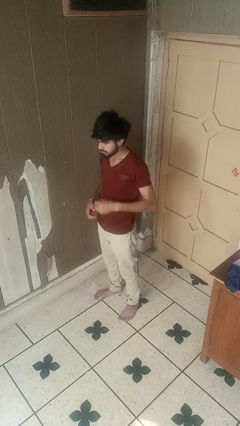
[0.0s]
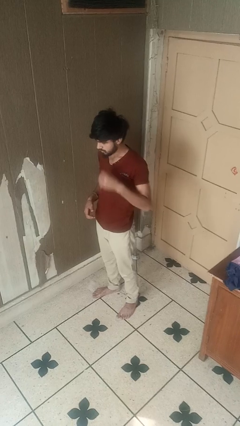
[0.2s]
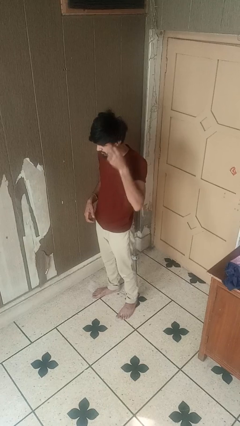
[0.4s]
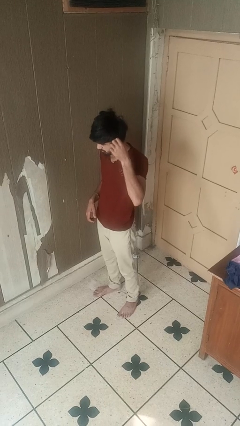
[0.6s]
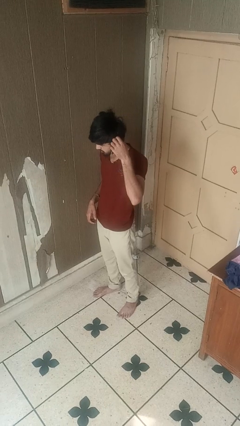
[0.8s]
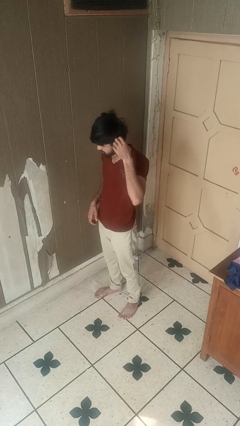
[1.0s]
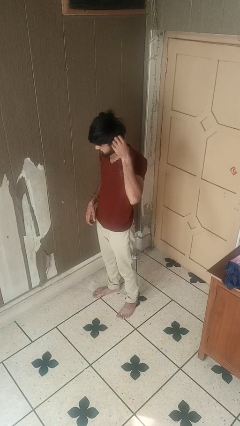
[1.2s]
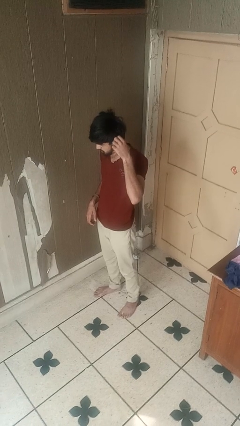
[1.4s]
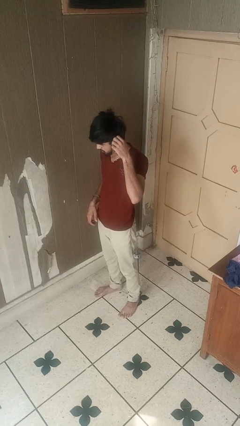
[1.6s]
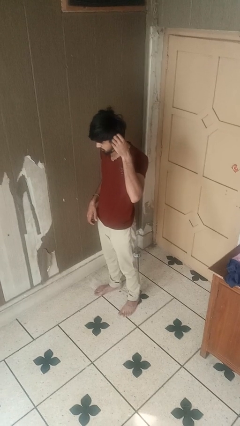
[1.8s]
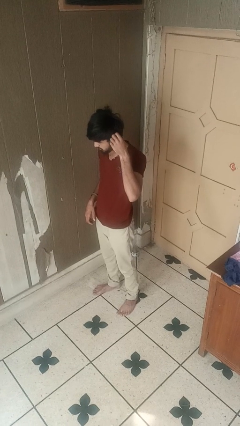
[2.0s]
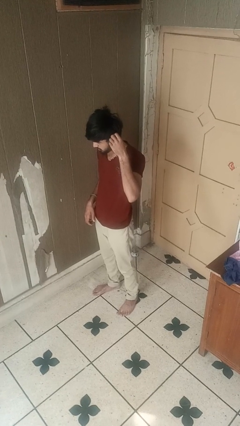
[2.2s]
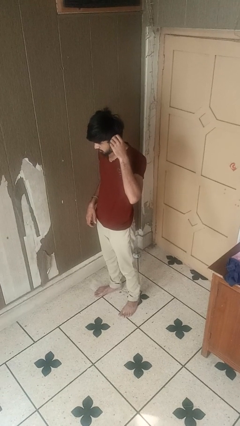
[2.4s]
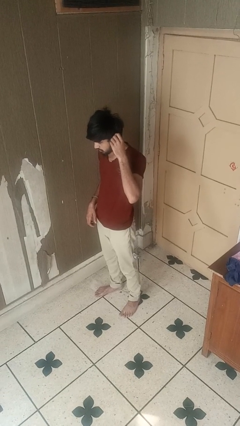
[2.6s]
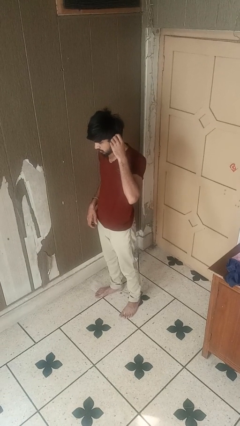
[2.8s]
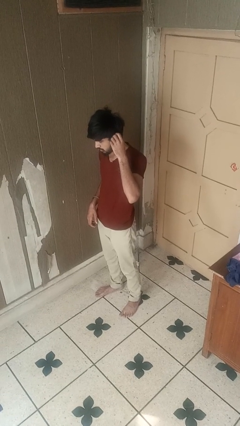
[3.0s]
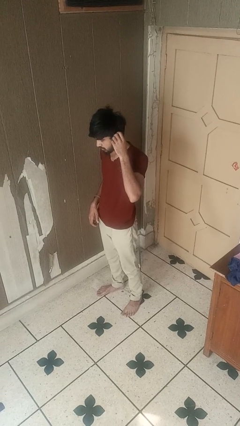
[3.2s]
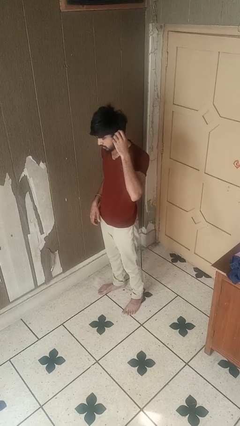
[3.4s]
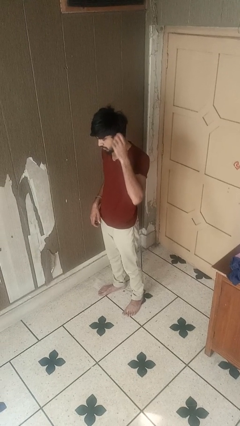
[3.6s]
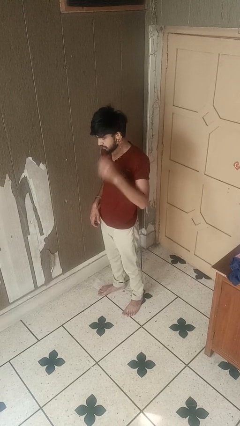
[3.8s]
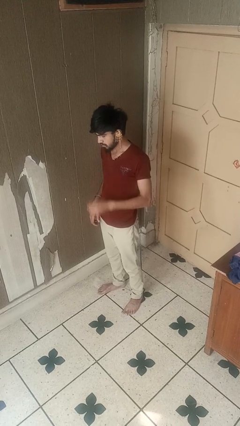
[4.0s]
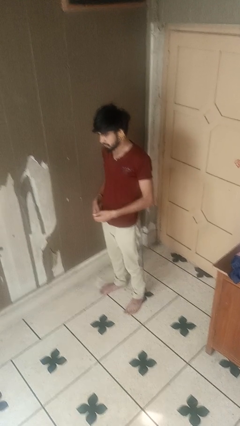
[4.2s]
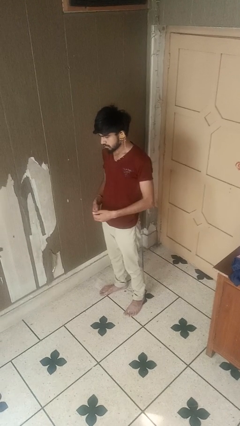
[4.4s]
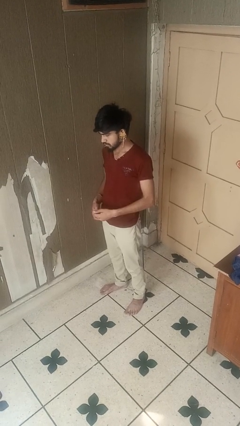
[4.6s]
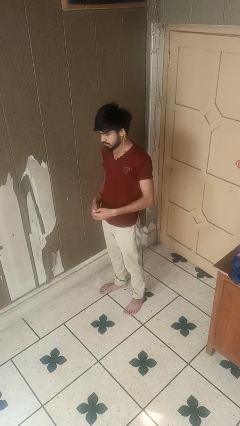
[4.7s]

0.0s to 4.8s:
person puts on earrings

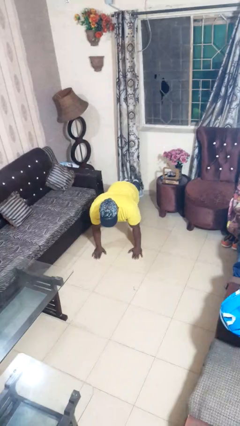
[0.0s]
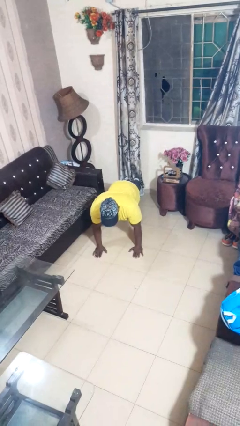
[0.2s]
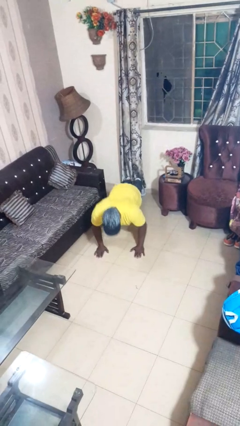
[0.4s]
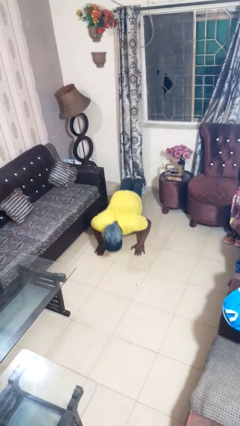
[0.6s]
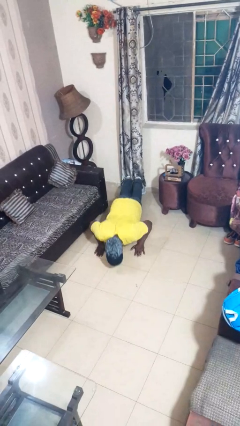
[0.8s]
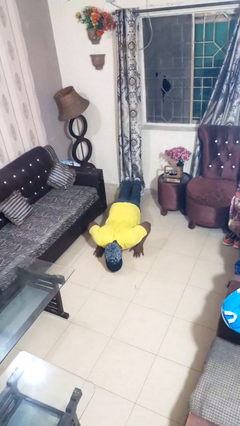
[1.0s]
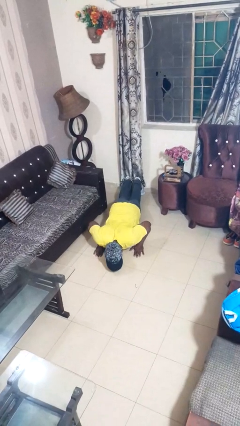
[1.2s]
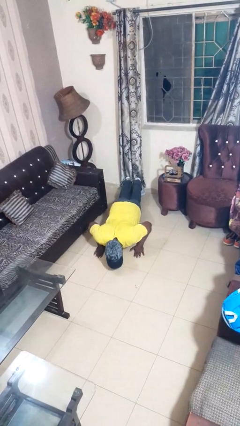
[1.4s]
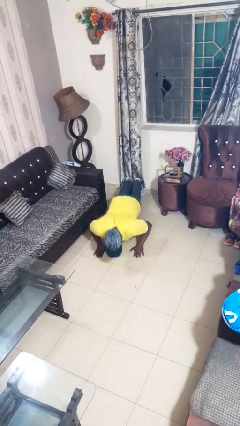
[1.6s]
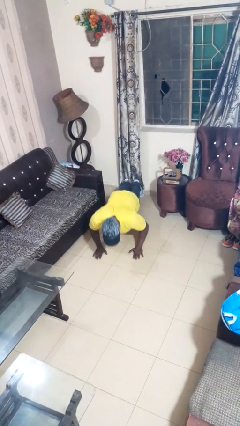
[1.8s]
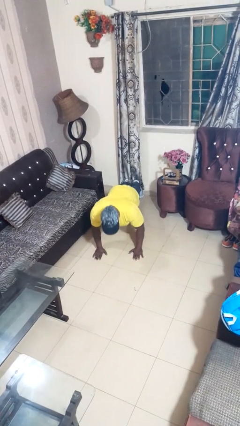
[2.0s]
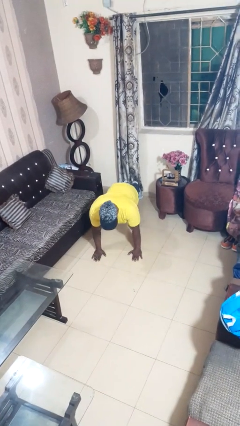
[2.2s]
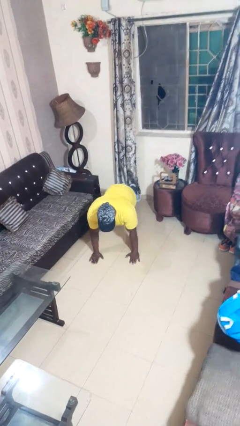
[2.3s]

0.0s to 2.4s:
person exercises with pushup

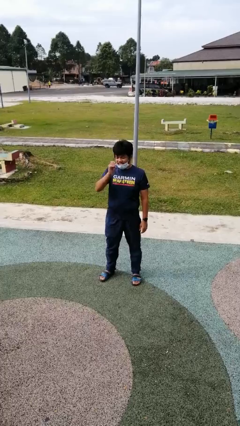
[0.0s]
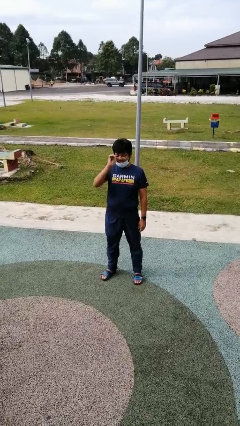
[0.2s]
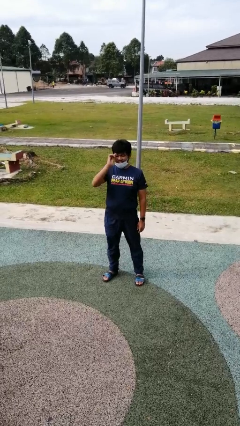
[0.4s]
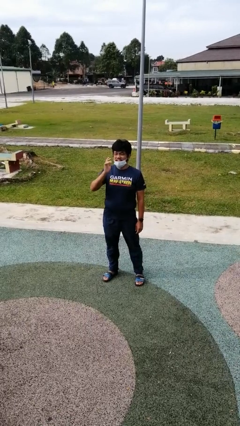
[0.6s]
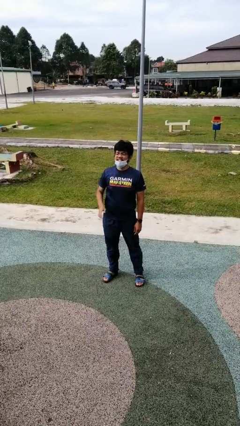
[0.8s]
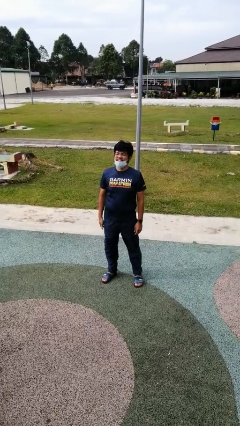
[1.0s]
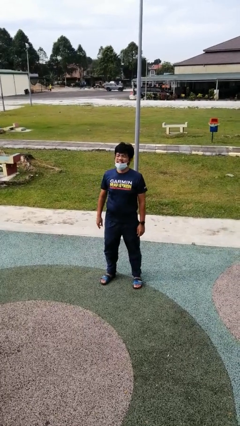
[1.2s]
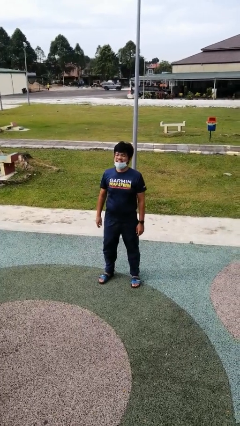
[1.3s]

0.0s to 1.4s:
person puts on glasses

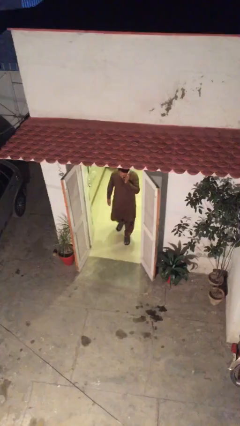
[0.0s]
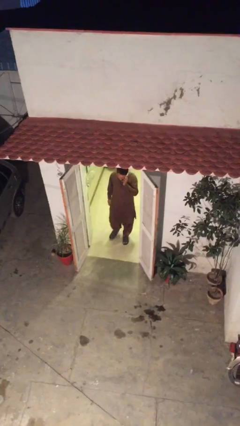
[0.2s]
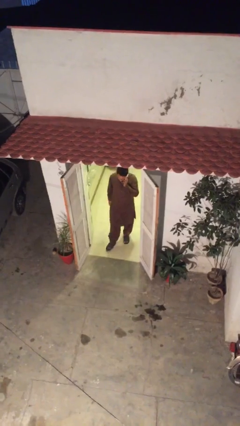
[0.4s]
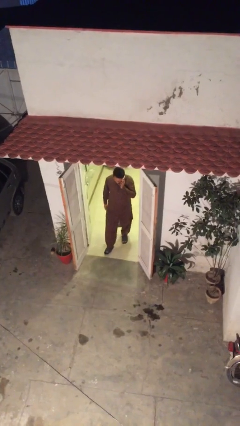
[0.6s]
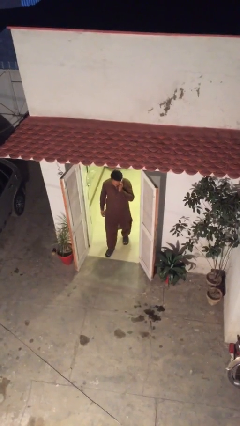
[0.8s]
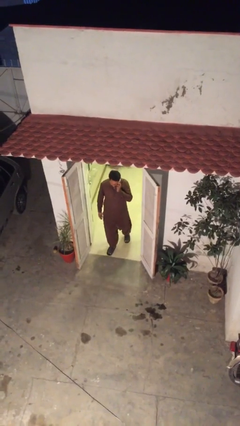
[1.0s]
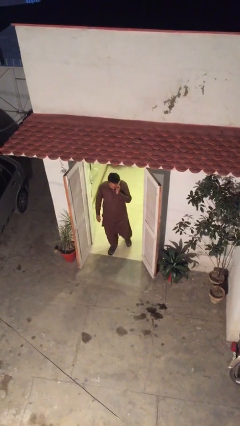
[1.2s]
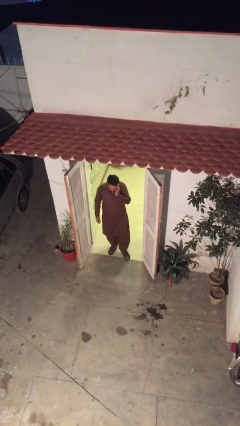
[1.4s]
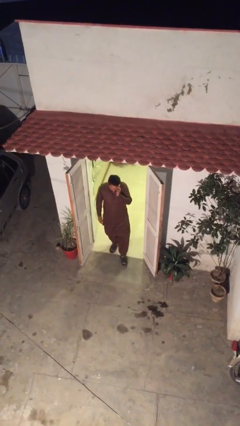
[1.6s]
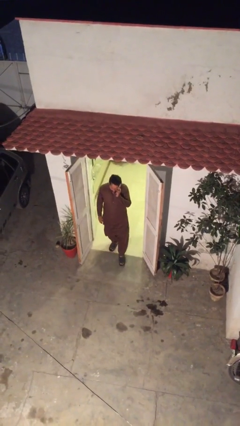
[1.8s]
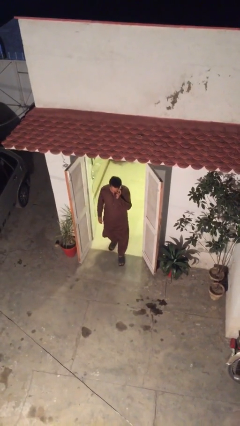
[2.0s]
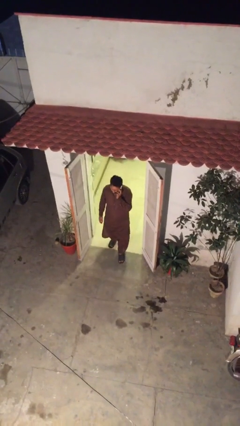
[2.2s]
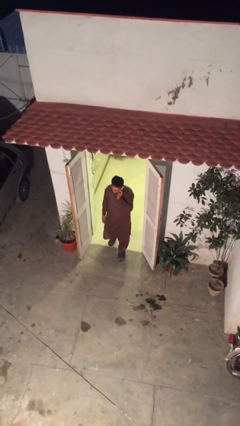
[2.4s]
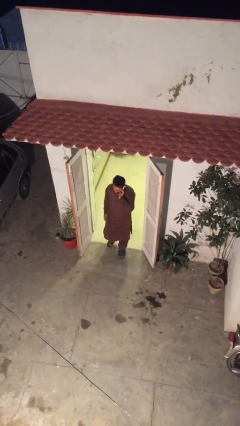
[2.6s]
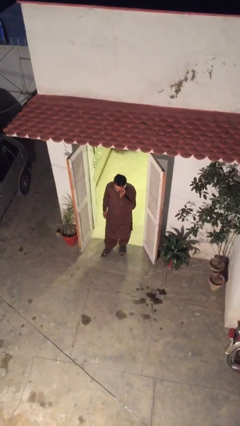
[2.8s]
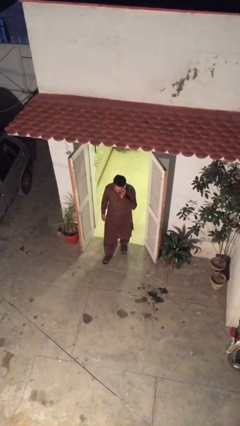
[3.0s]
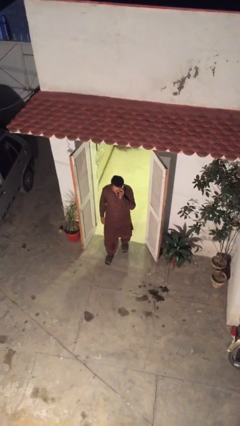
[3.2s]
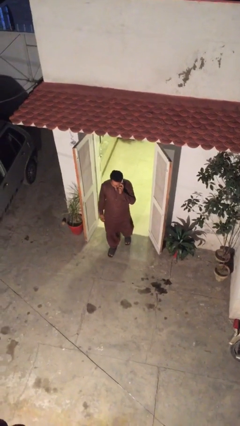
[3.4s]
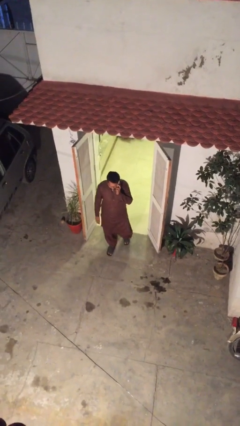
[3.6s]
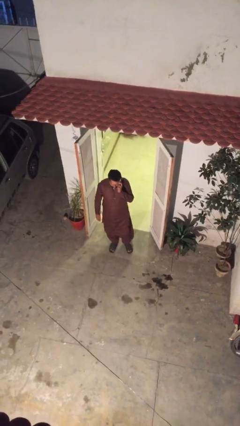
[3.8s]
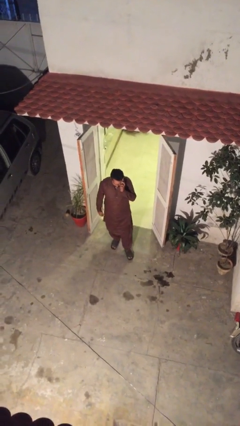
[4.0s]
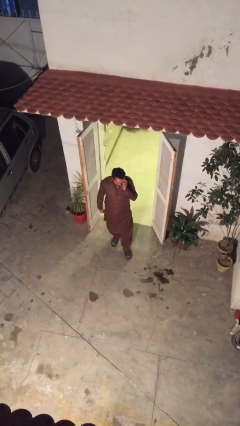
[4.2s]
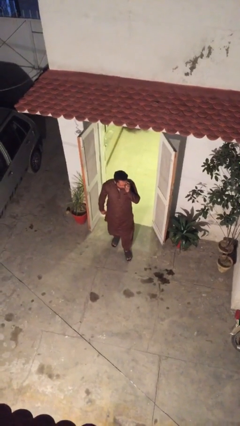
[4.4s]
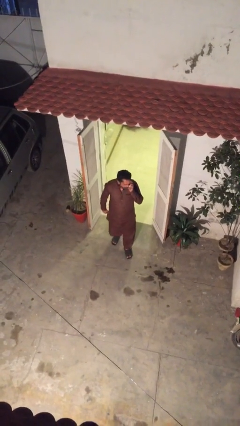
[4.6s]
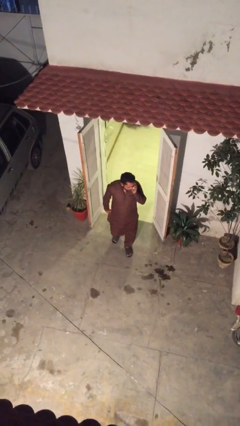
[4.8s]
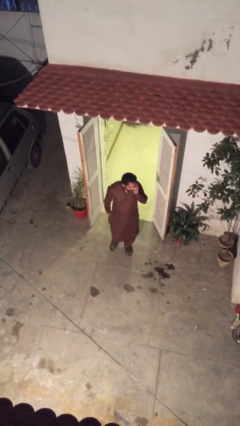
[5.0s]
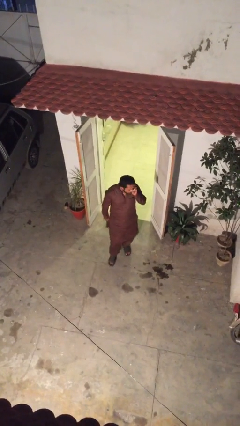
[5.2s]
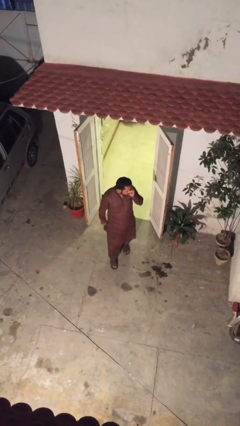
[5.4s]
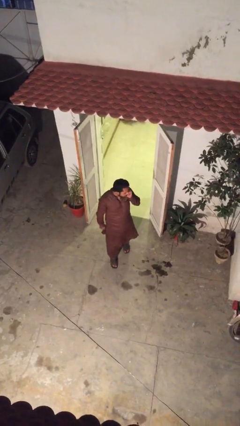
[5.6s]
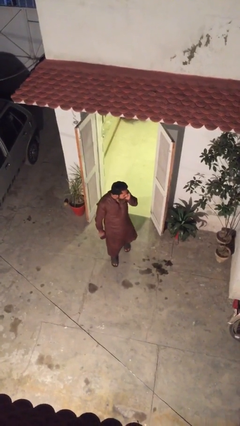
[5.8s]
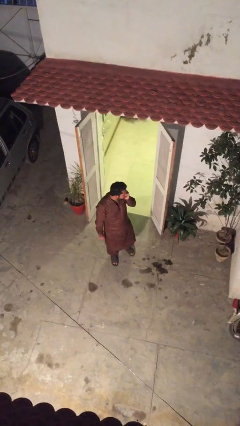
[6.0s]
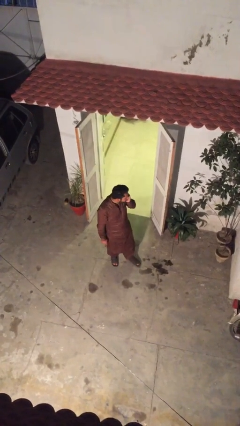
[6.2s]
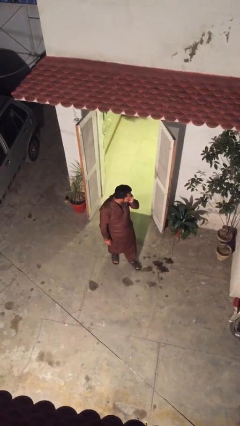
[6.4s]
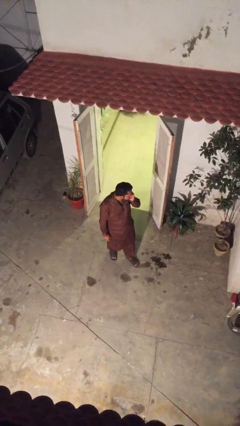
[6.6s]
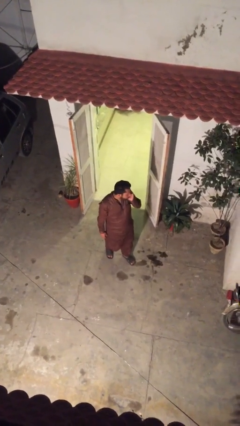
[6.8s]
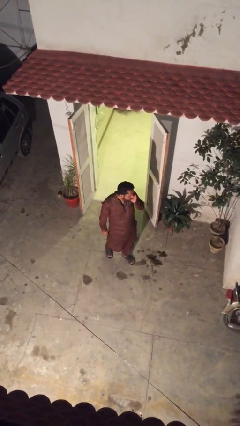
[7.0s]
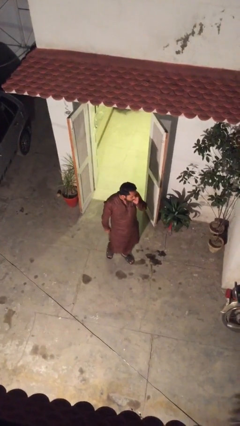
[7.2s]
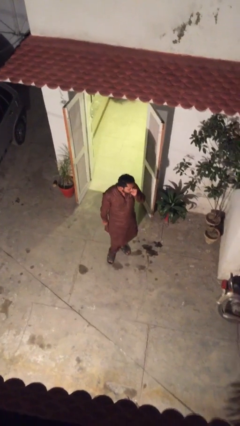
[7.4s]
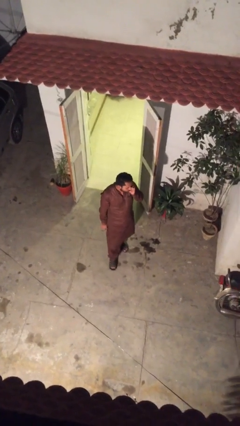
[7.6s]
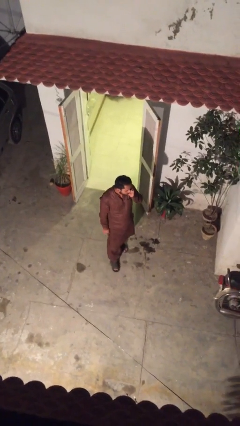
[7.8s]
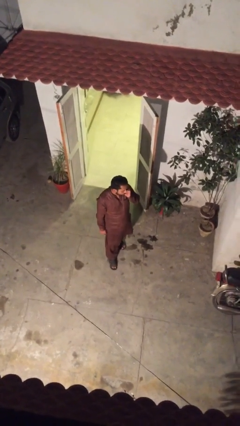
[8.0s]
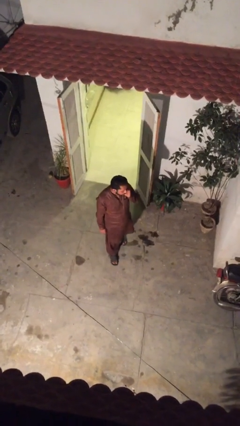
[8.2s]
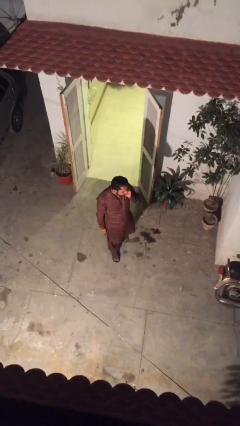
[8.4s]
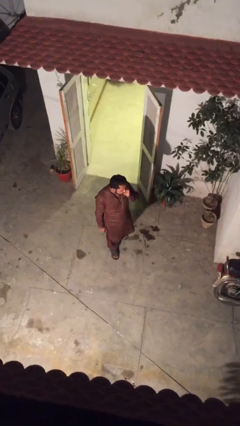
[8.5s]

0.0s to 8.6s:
person enters scene through structure

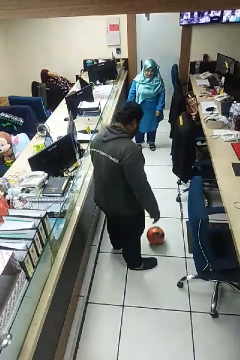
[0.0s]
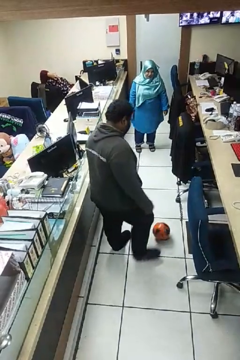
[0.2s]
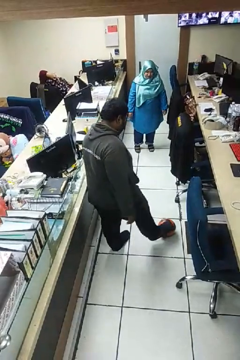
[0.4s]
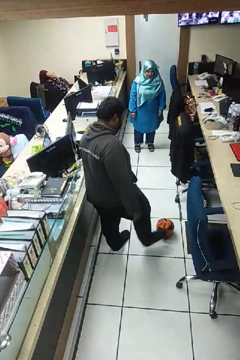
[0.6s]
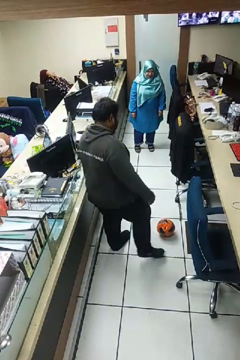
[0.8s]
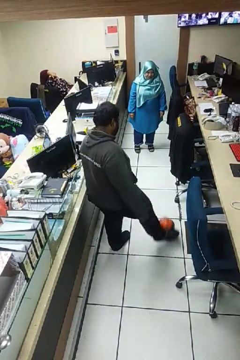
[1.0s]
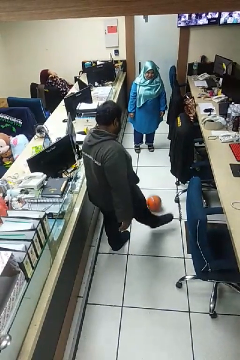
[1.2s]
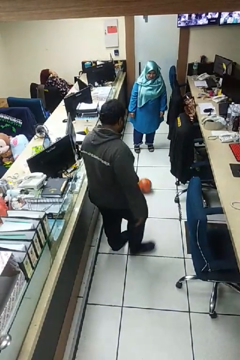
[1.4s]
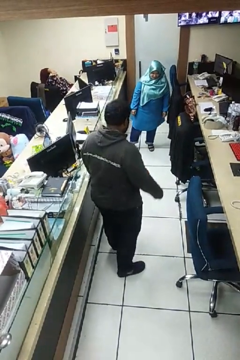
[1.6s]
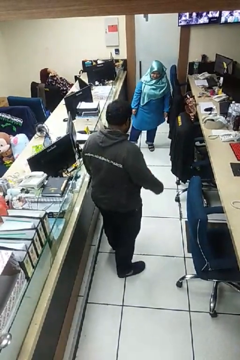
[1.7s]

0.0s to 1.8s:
person kicks object to person
